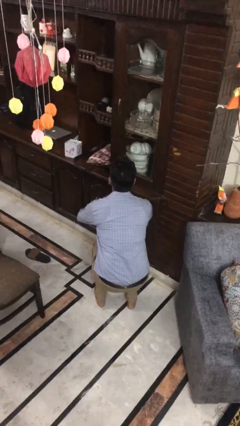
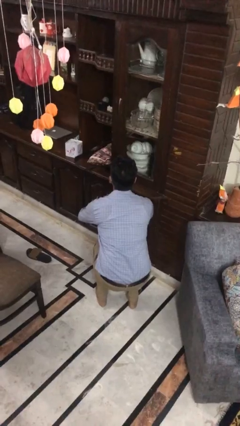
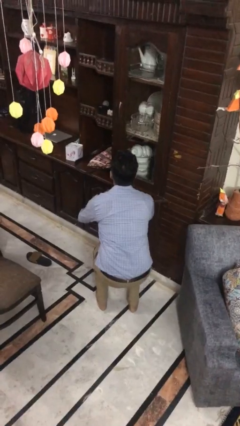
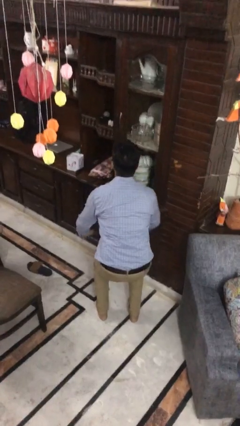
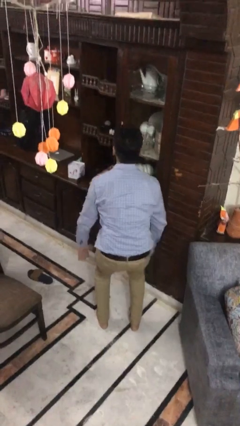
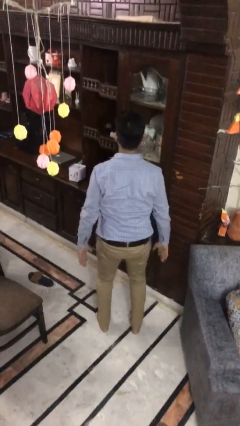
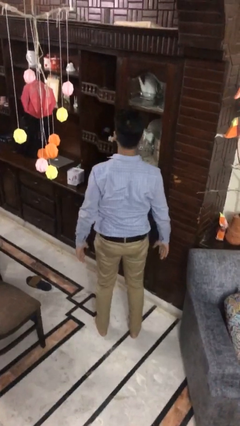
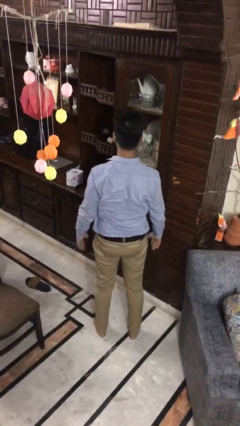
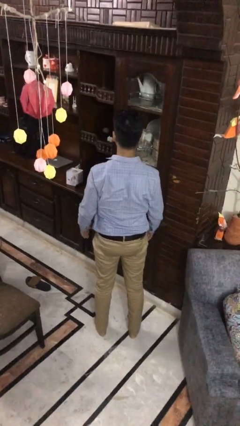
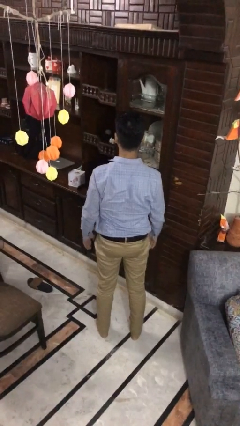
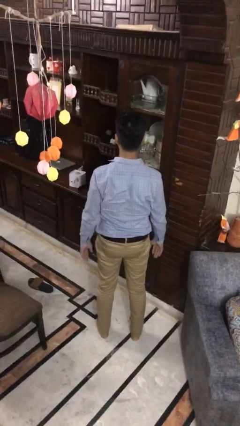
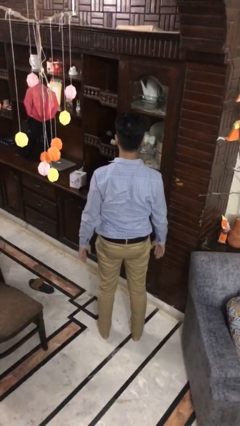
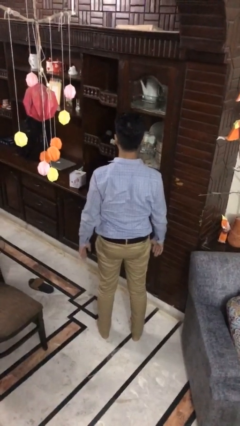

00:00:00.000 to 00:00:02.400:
person stands up

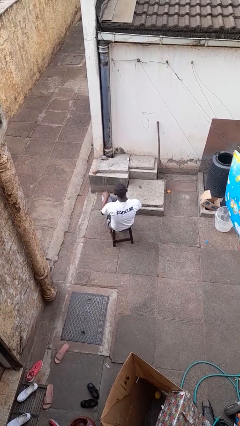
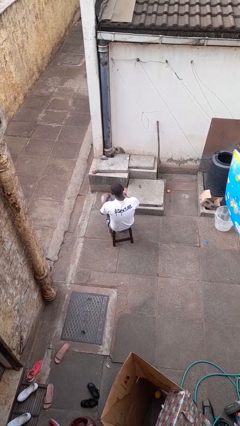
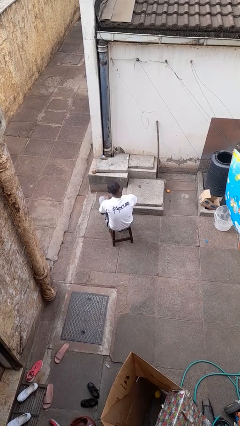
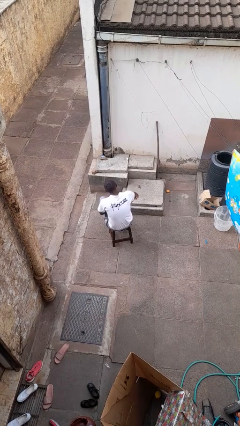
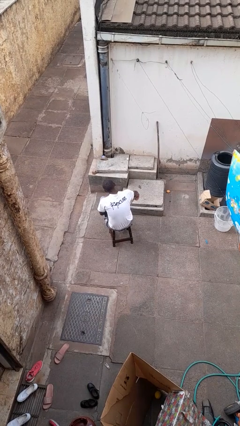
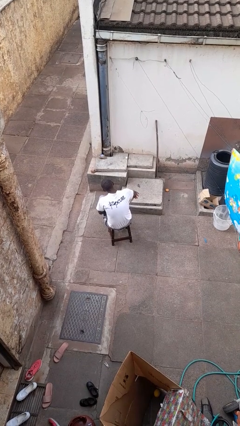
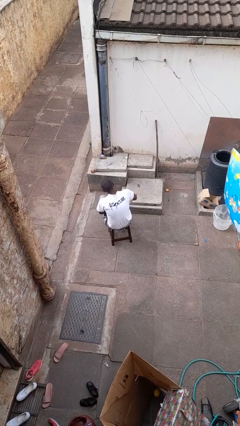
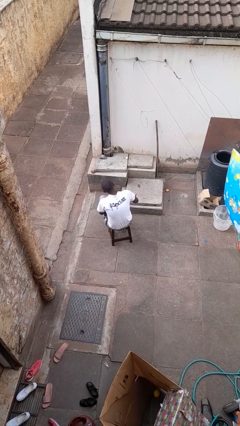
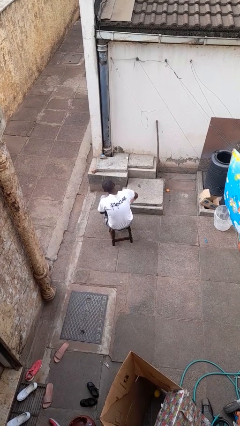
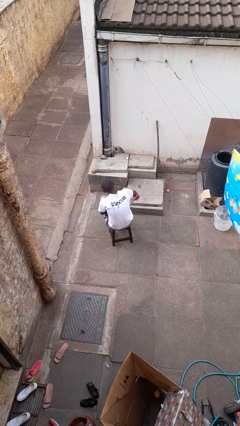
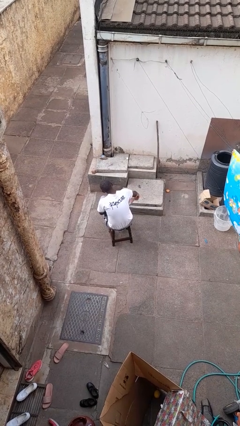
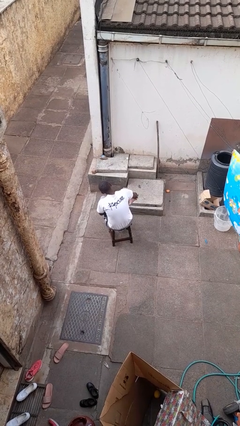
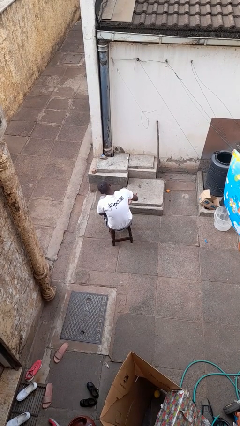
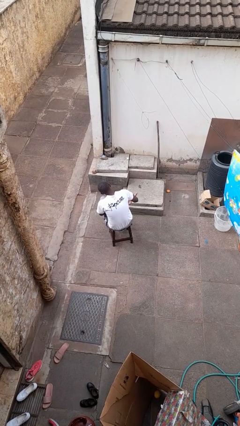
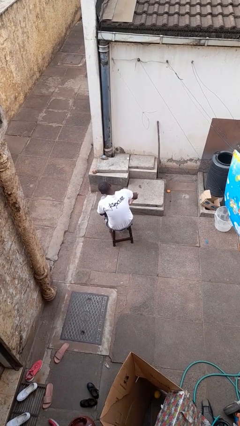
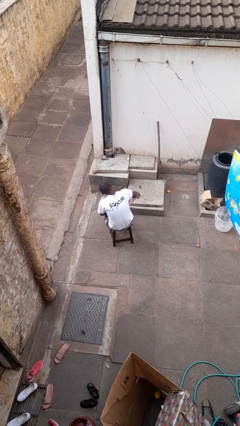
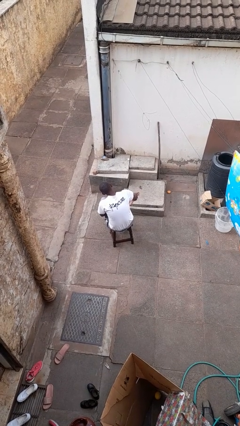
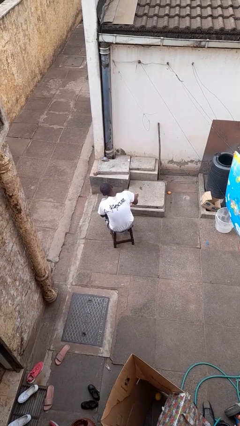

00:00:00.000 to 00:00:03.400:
person rubs foot

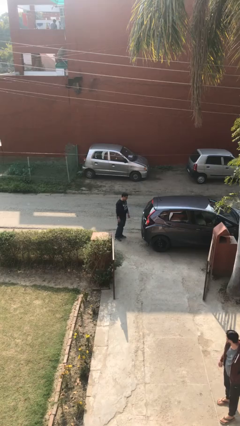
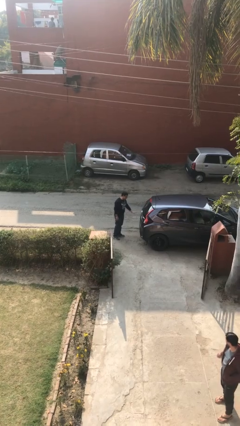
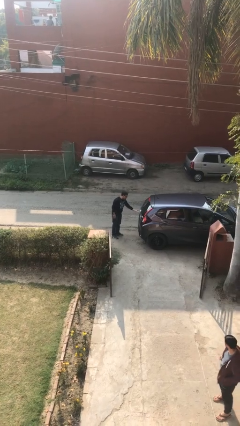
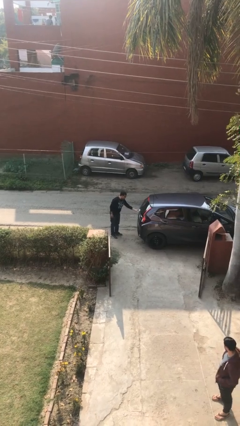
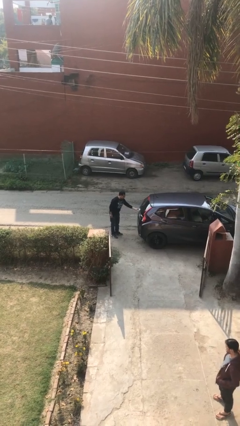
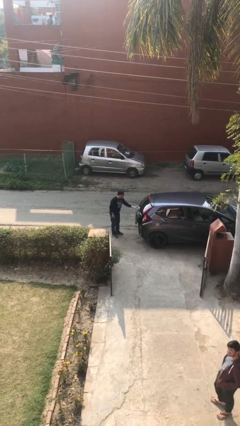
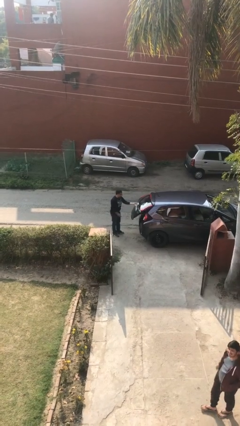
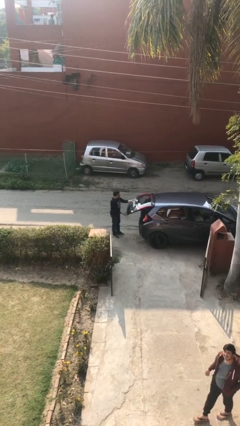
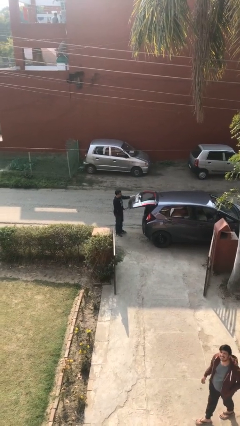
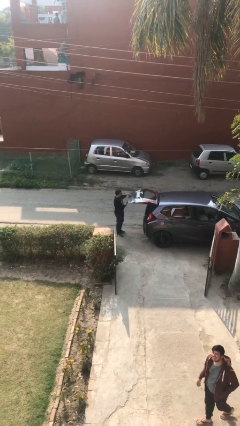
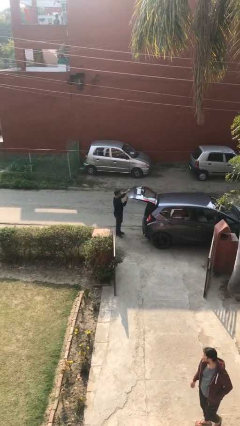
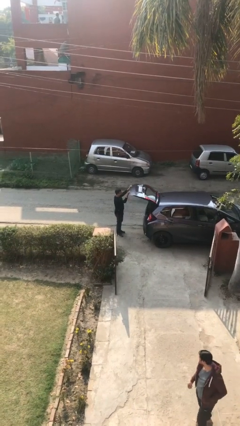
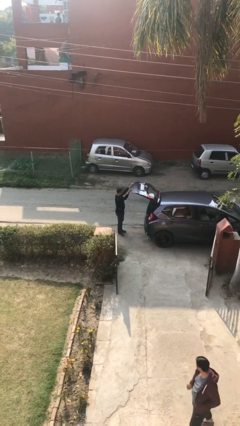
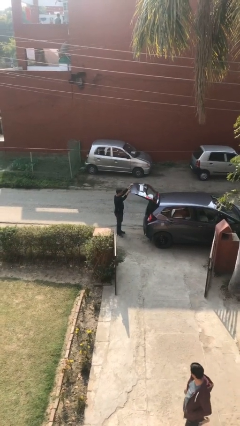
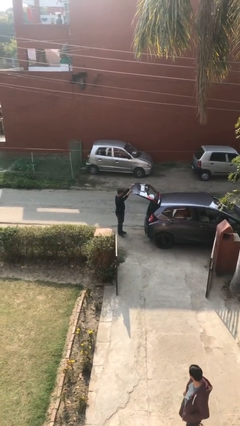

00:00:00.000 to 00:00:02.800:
person opens car trunk

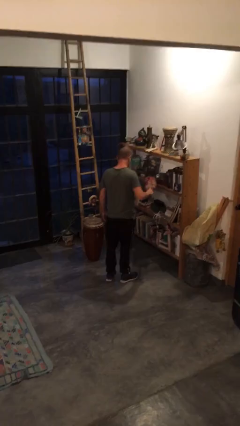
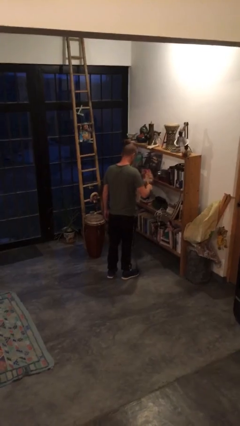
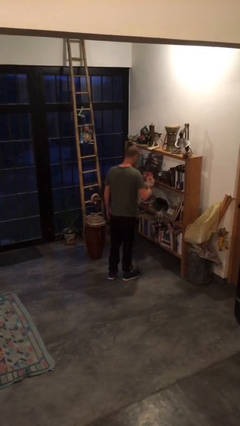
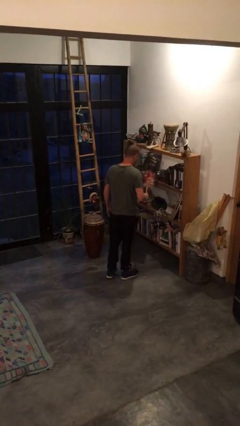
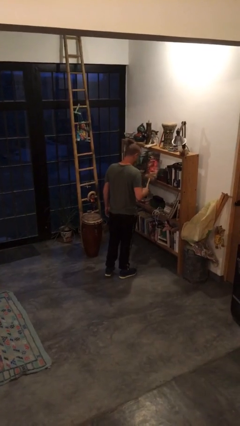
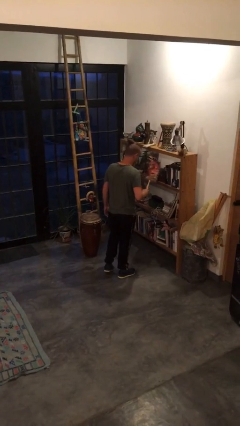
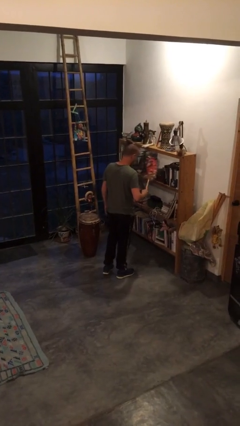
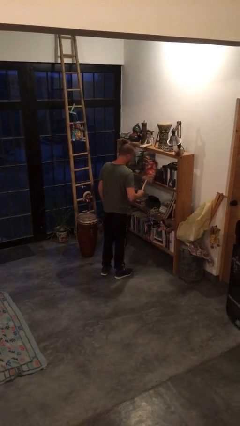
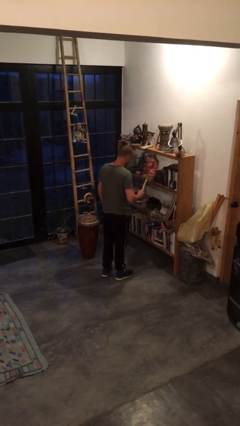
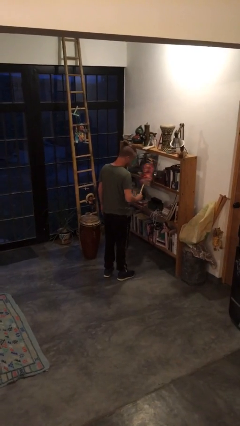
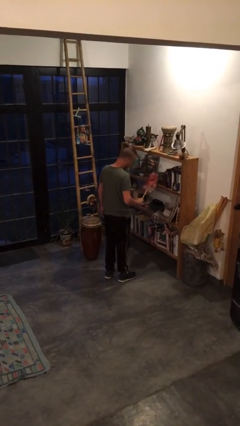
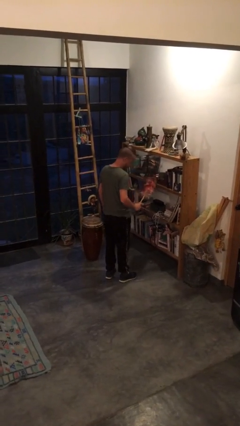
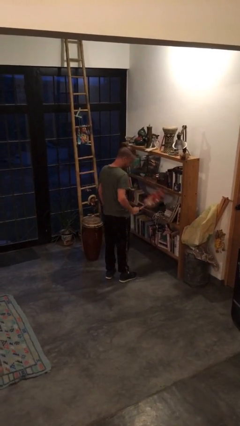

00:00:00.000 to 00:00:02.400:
person dusts furniture

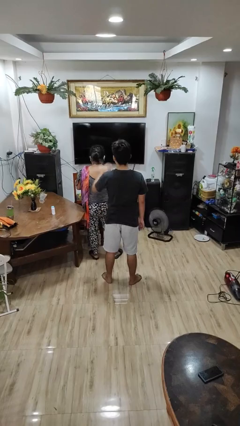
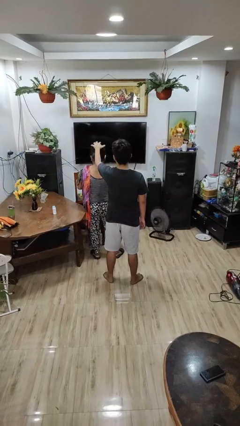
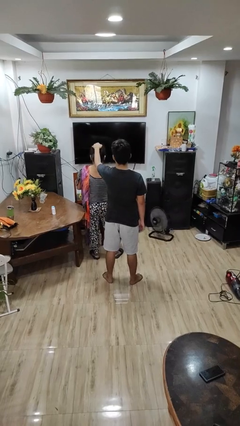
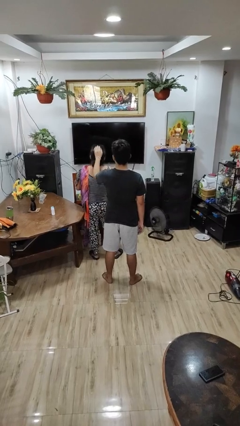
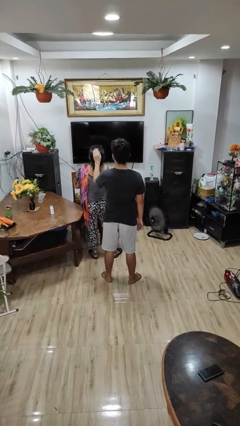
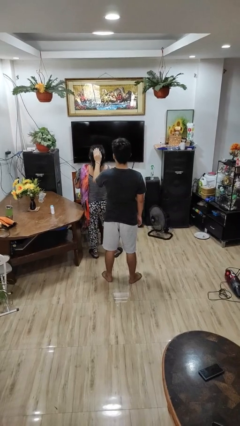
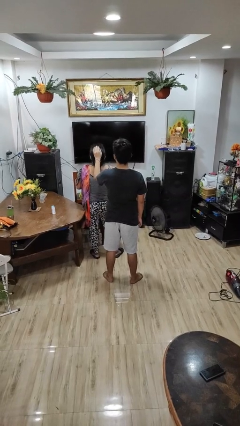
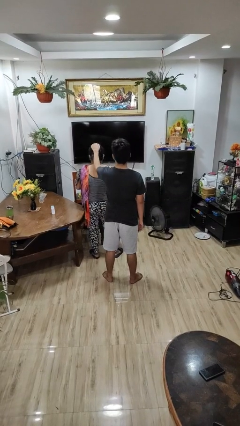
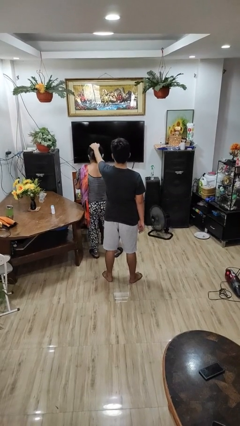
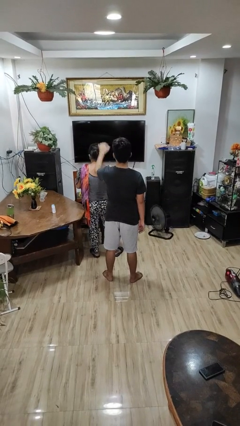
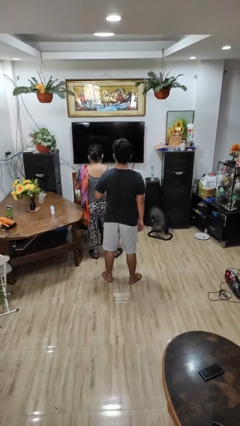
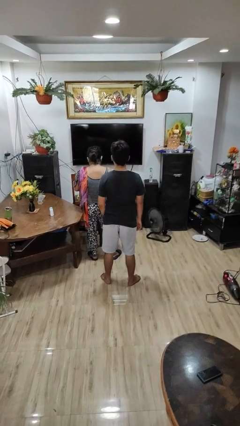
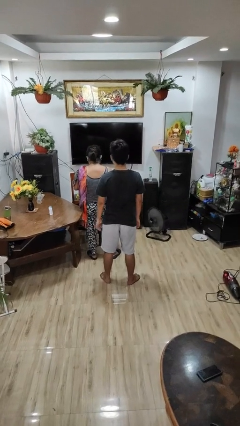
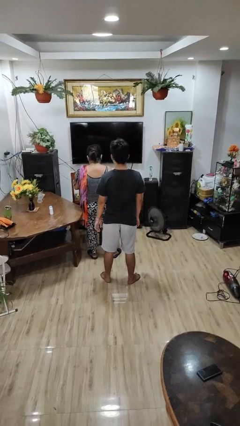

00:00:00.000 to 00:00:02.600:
person grabs person by hair

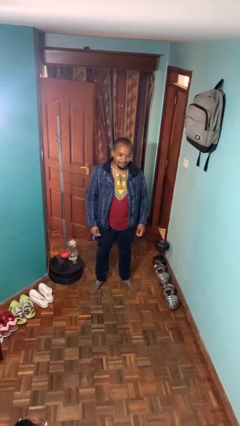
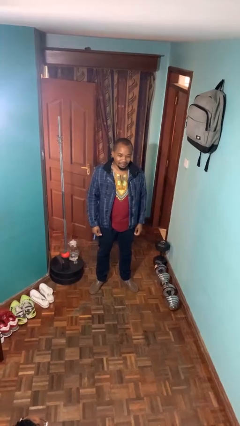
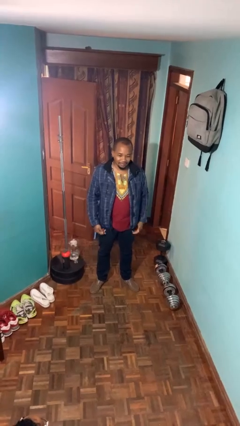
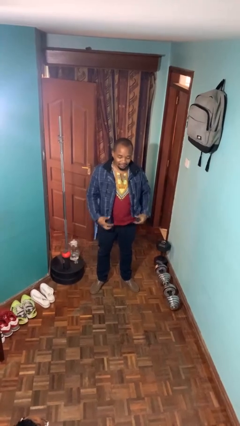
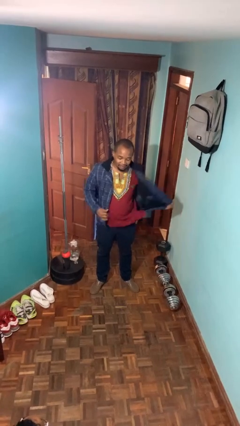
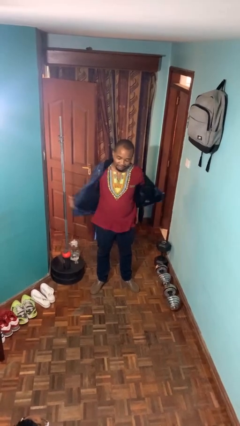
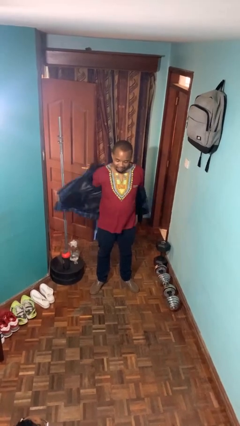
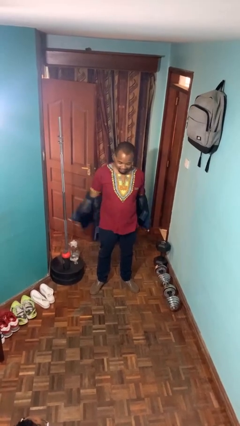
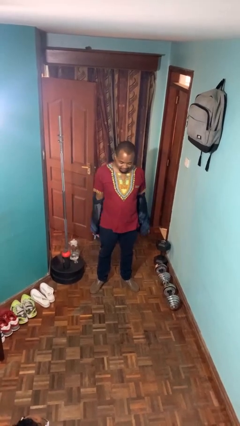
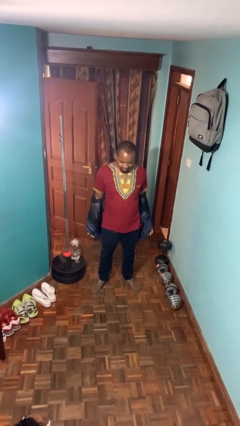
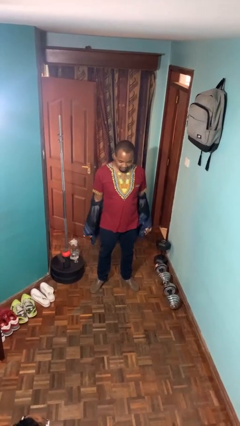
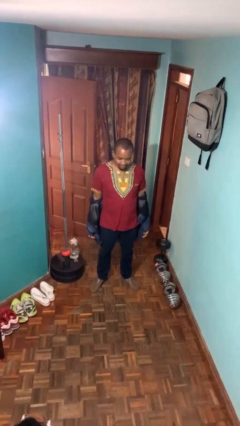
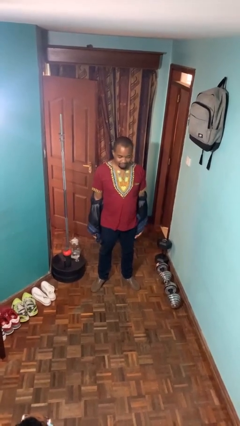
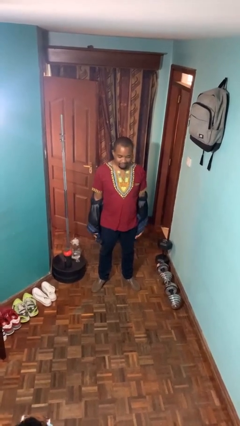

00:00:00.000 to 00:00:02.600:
person takes off jacket

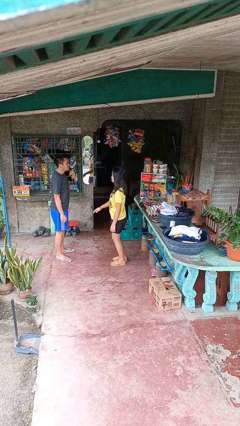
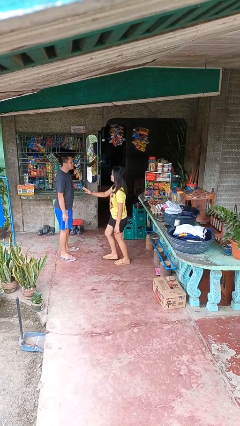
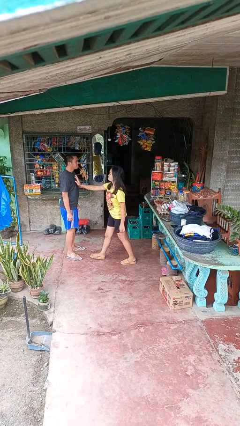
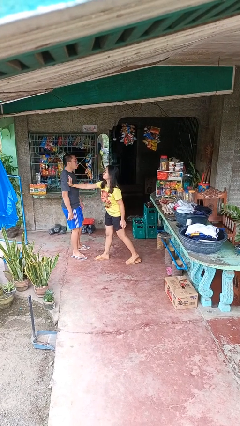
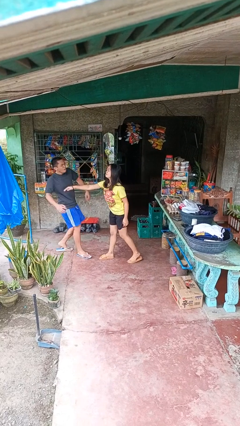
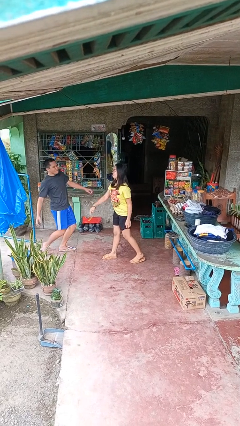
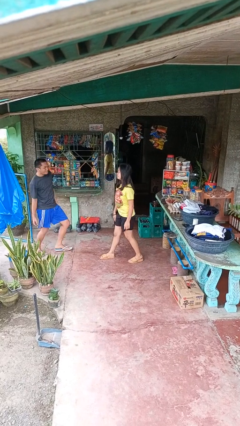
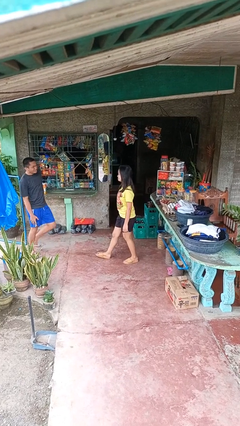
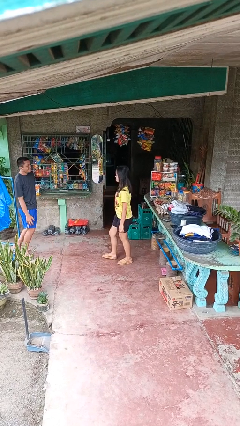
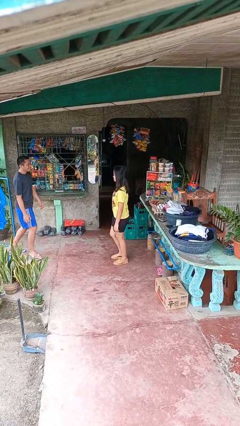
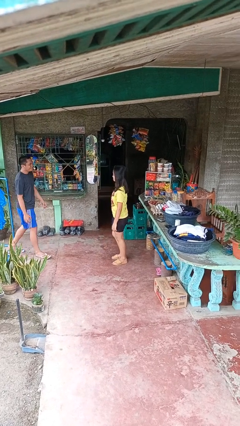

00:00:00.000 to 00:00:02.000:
person shoves person
